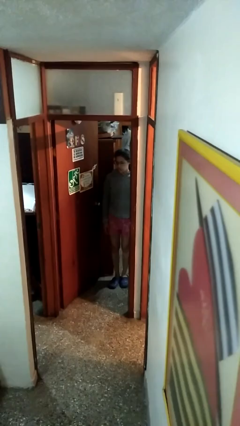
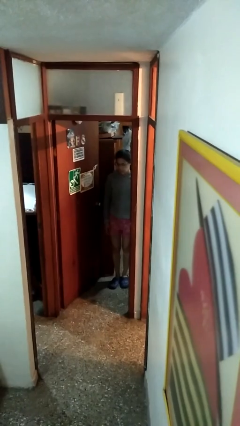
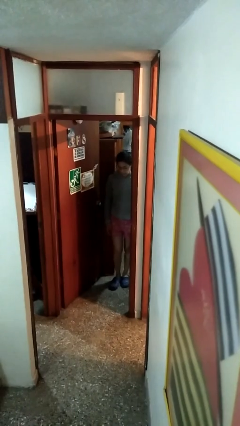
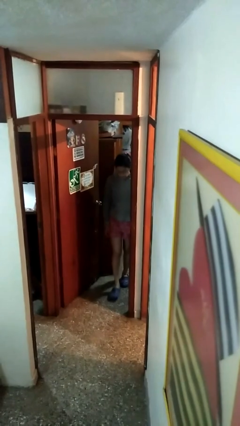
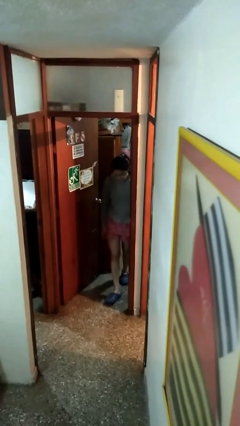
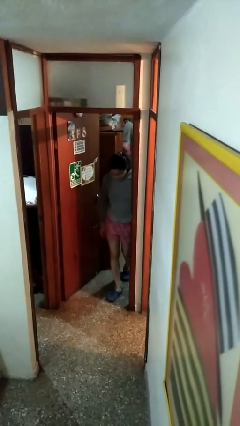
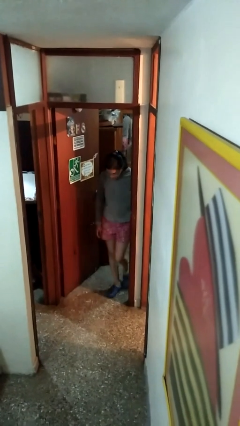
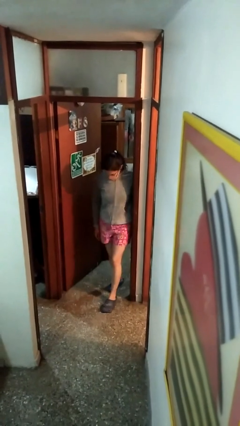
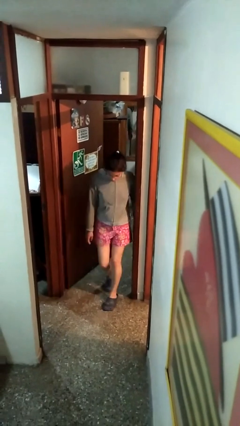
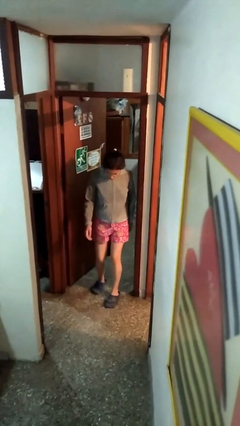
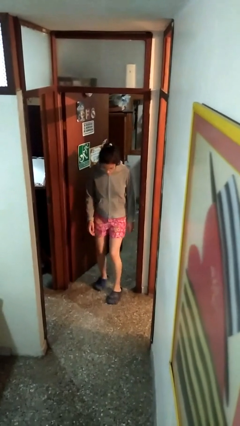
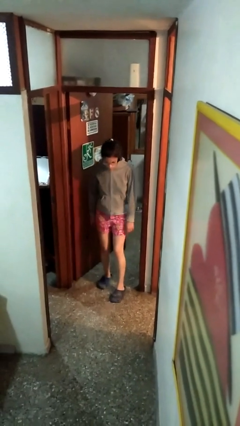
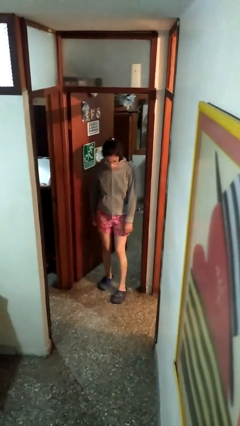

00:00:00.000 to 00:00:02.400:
person bumps into wall

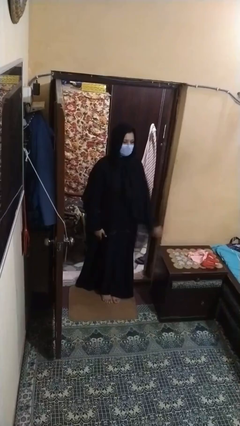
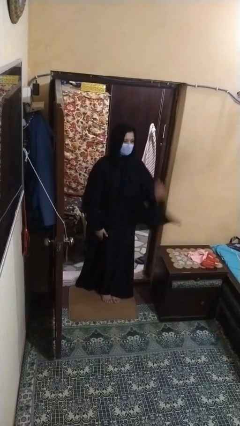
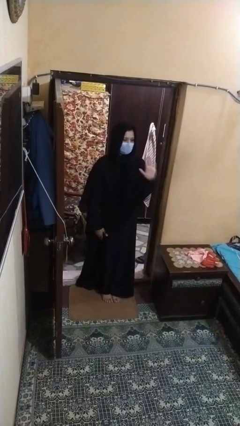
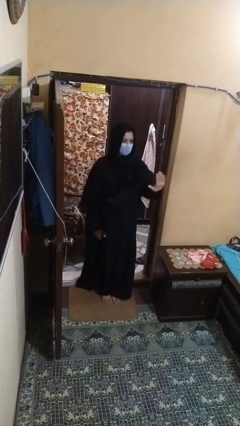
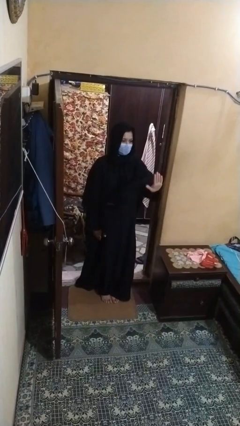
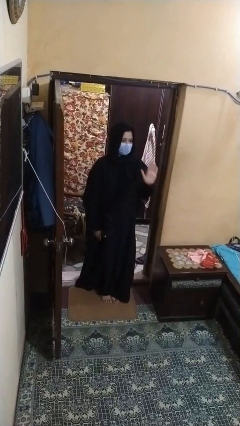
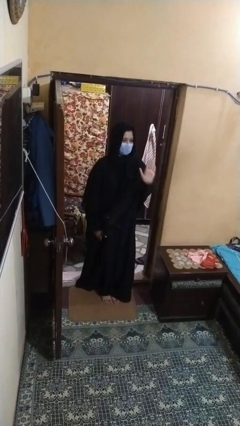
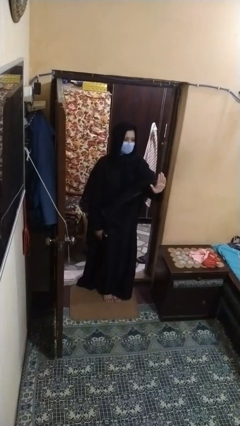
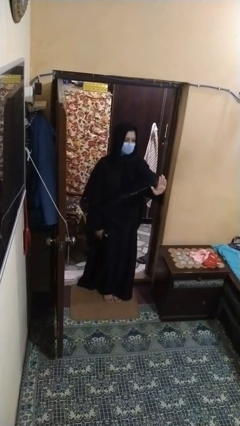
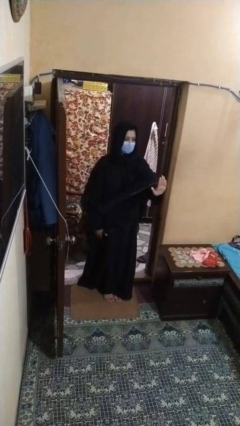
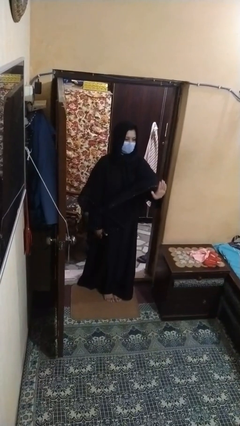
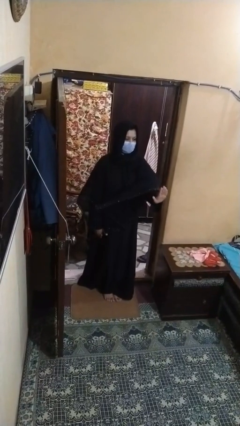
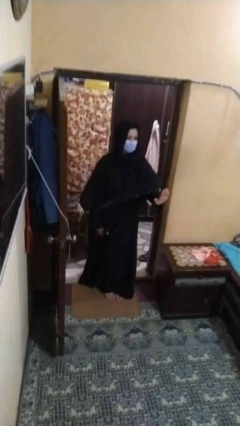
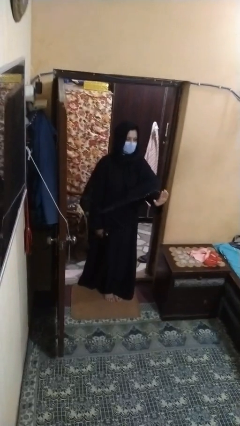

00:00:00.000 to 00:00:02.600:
person gestures stop

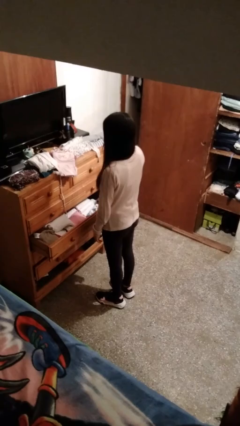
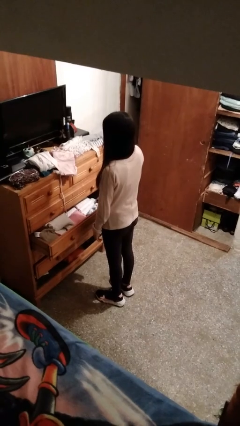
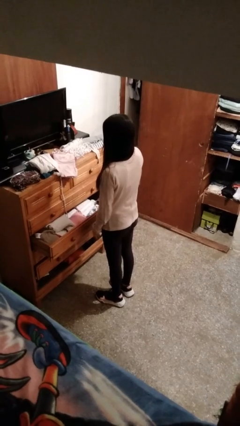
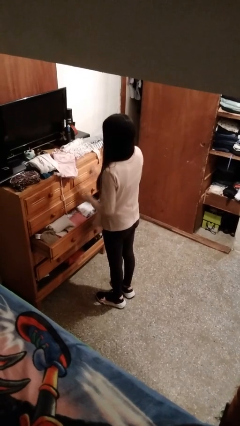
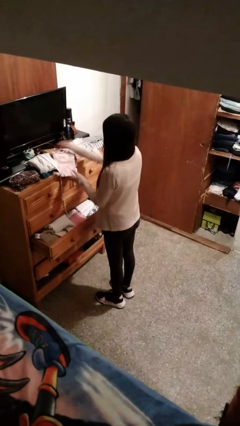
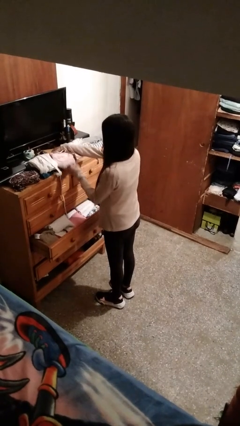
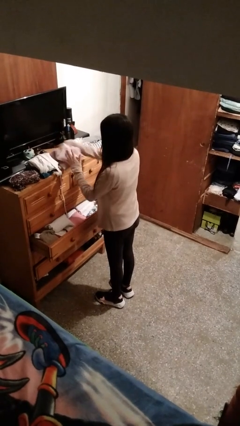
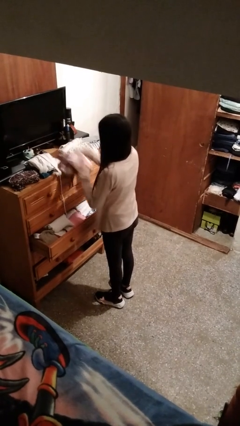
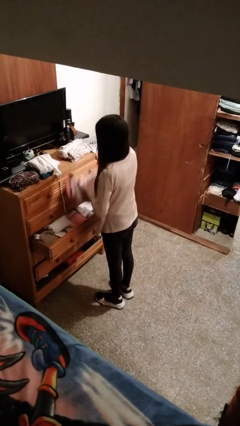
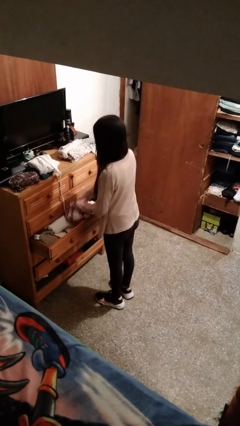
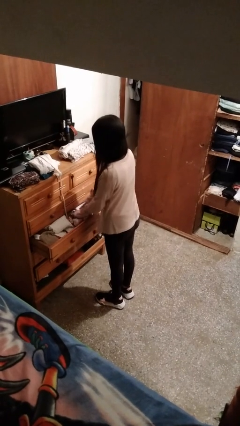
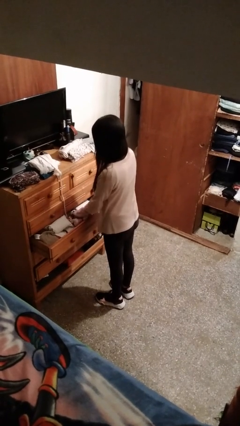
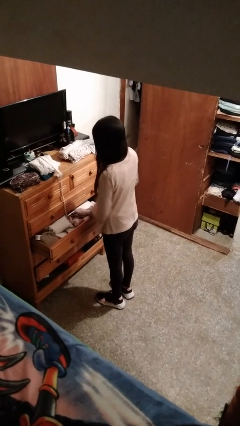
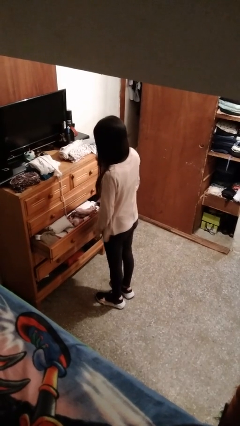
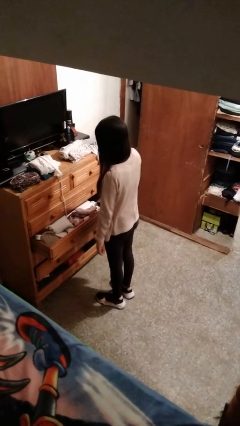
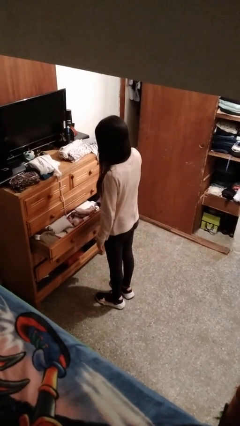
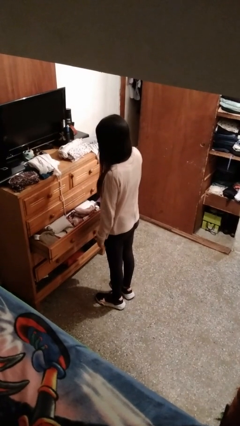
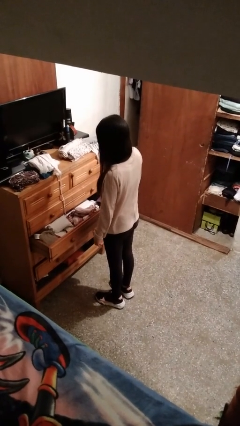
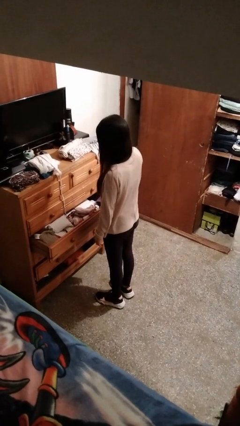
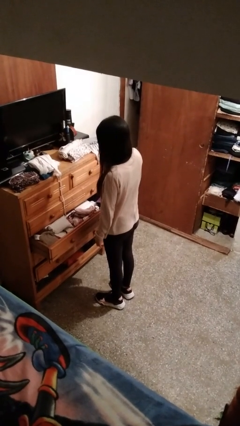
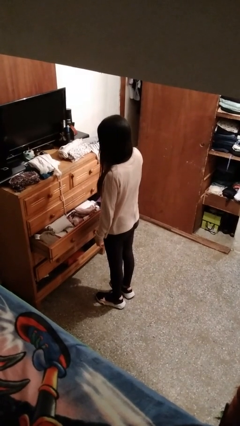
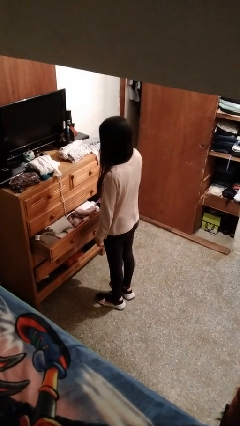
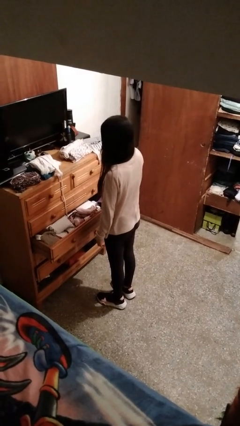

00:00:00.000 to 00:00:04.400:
person puts clothes into dresser

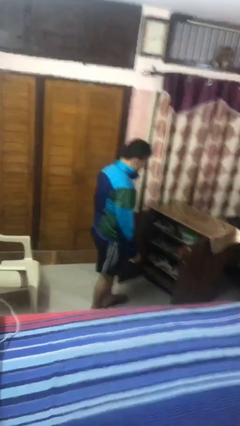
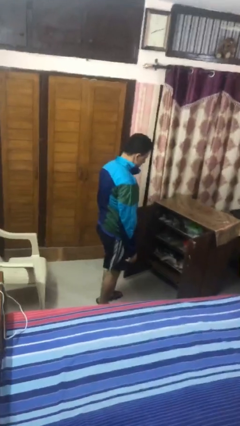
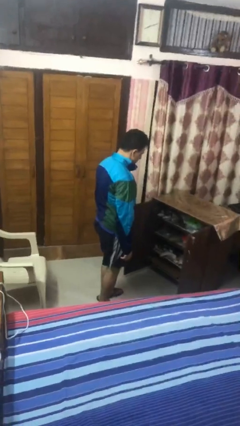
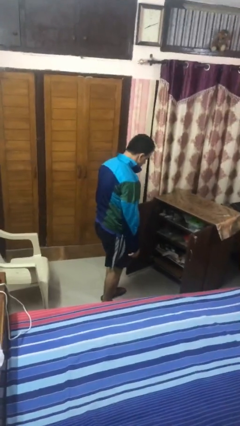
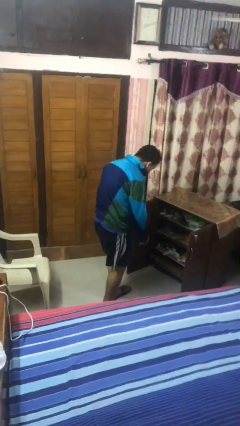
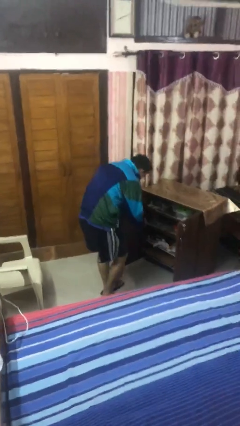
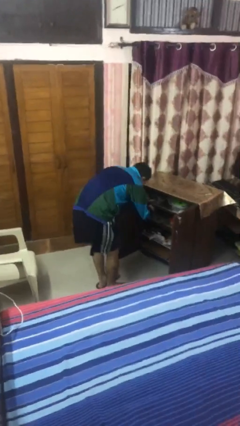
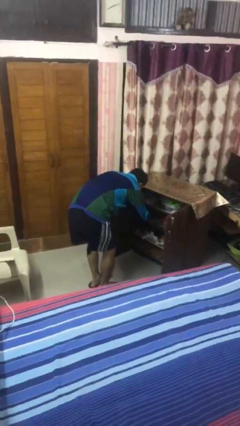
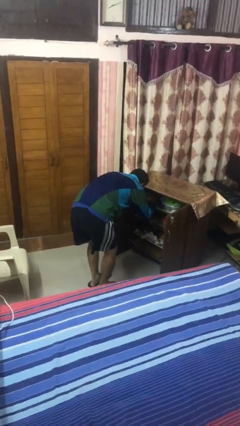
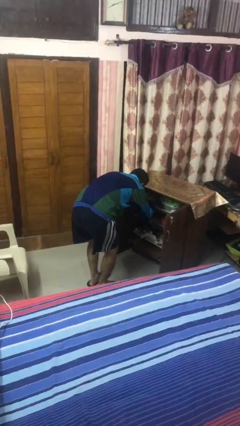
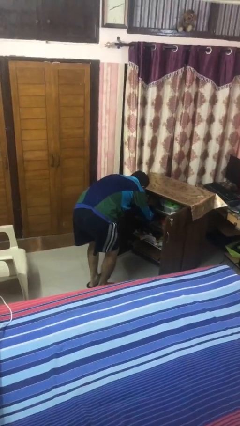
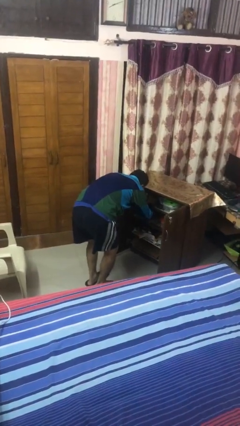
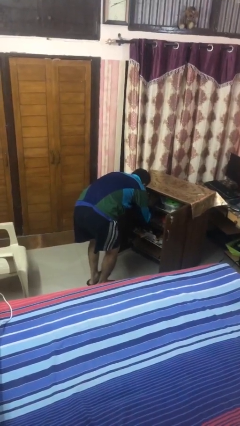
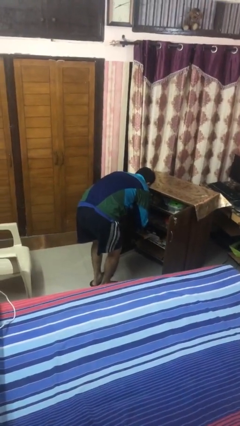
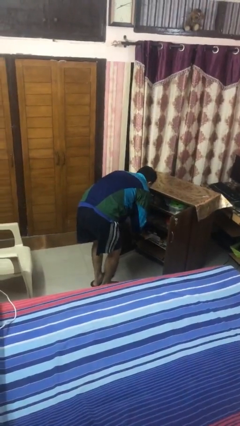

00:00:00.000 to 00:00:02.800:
person searches in cabinet

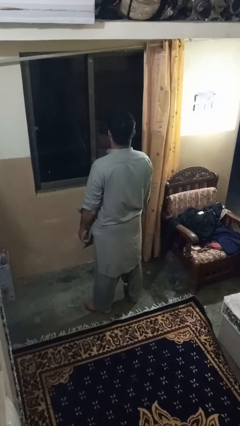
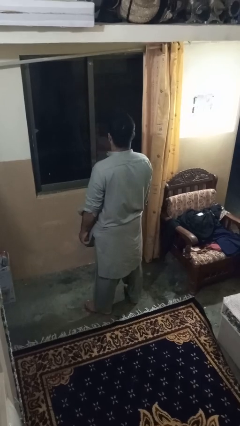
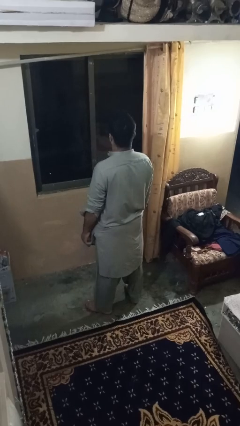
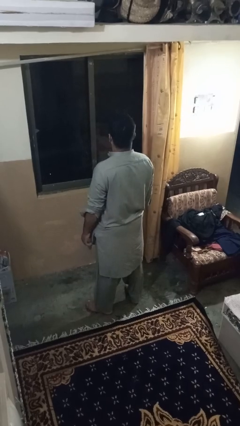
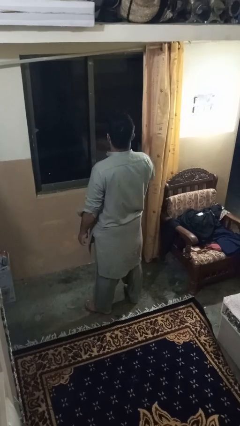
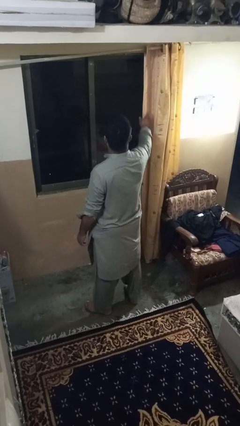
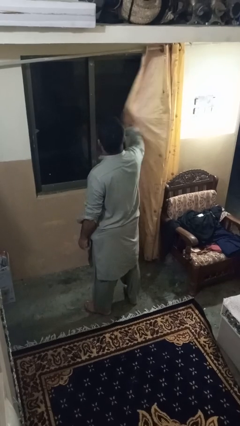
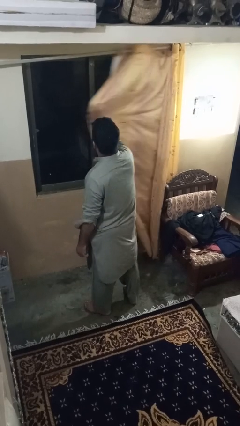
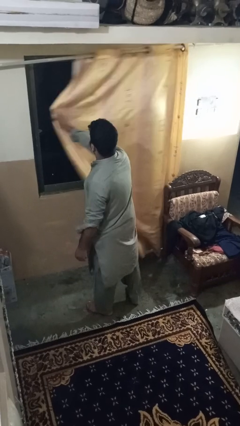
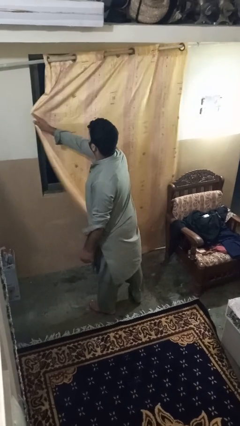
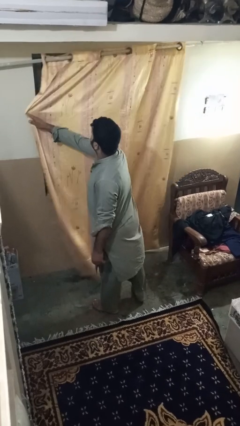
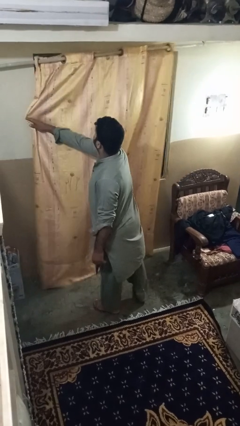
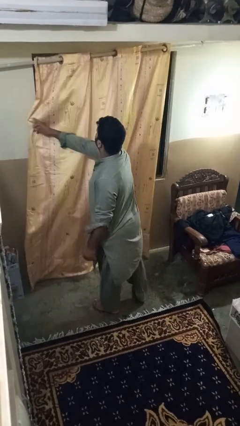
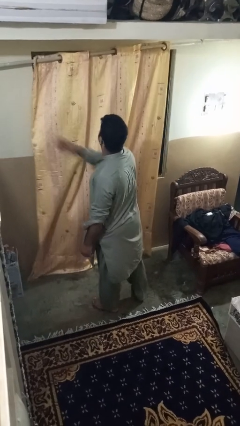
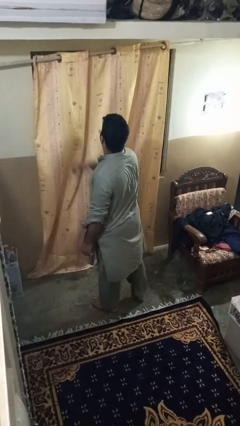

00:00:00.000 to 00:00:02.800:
person closes curtains

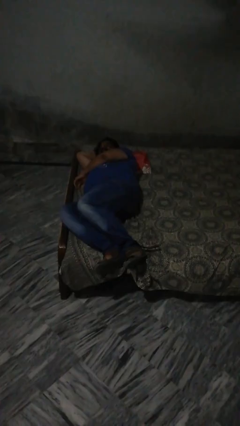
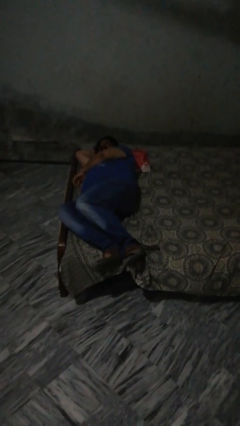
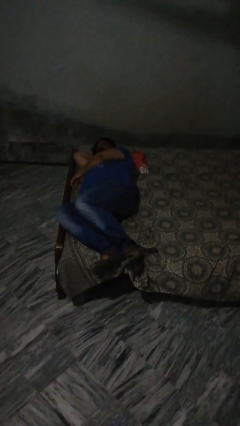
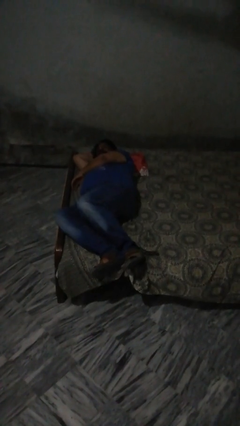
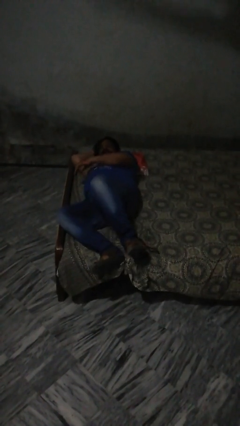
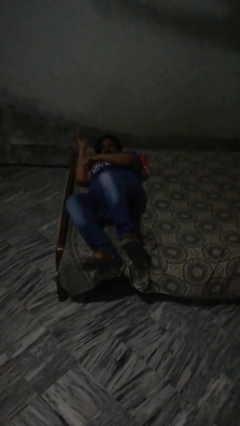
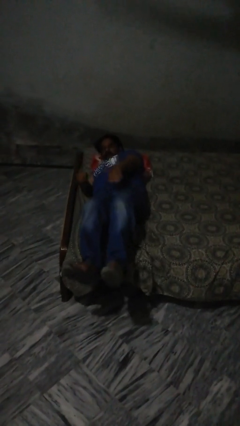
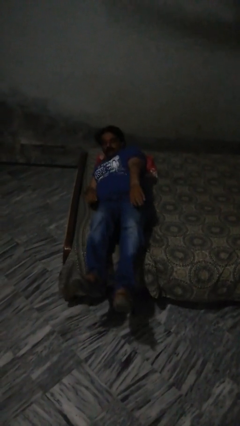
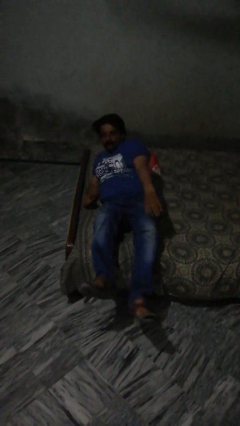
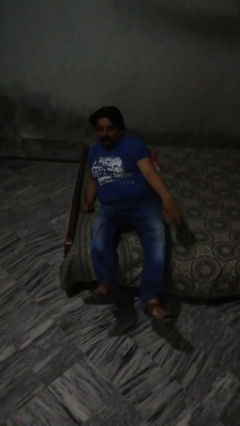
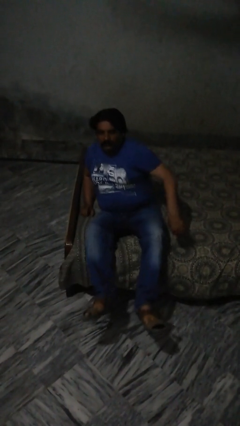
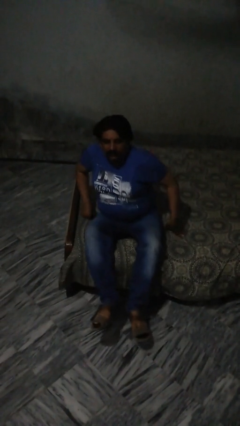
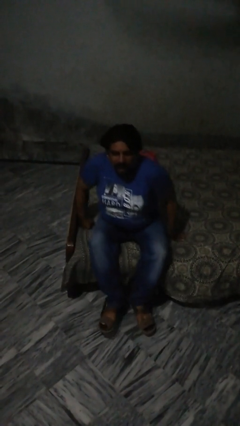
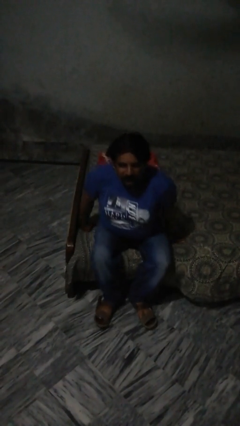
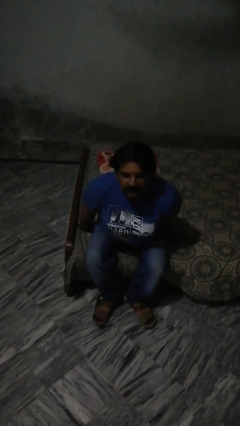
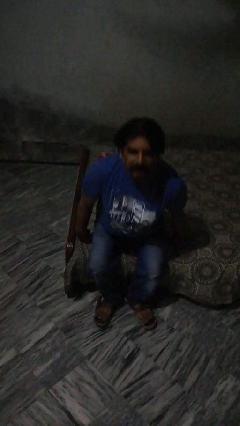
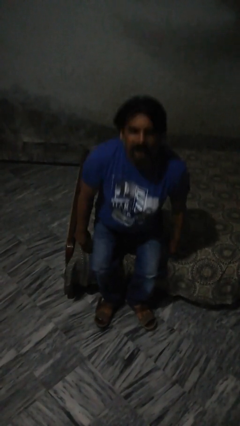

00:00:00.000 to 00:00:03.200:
person stands up
